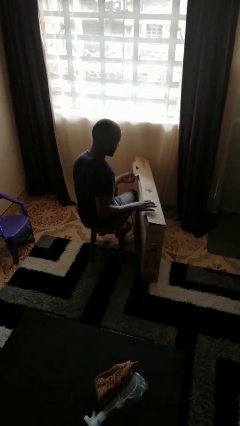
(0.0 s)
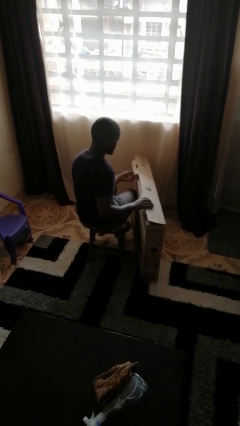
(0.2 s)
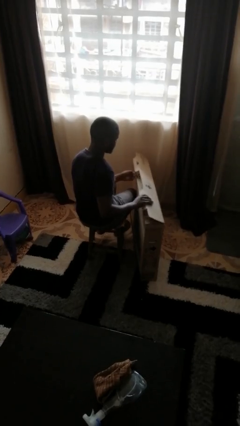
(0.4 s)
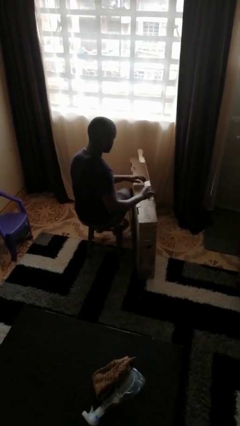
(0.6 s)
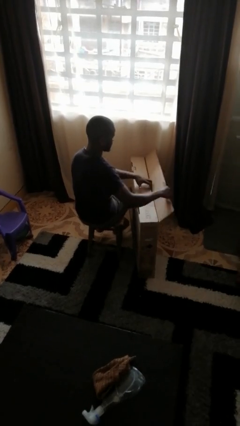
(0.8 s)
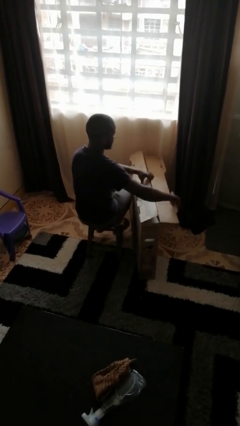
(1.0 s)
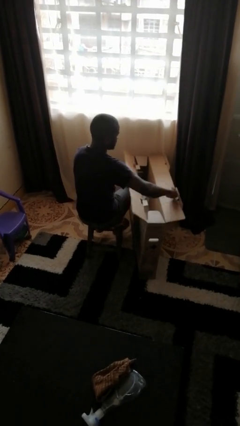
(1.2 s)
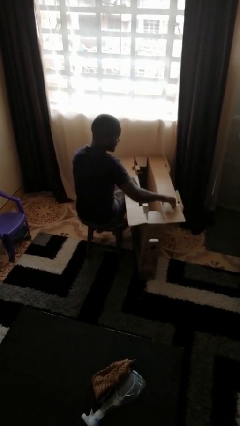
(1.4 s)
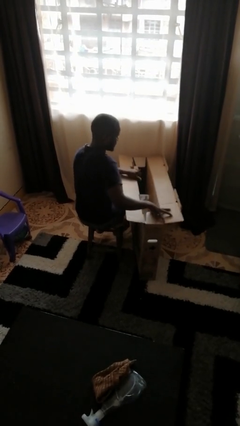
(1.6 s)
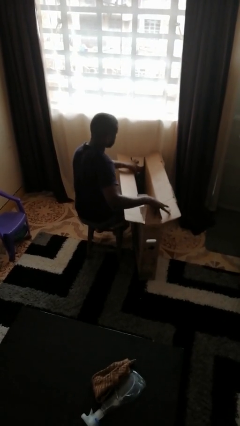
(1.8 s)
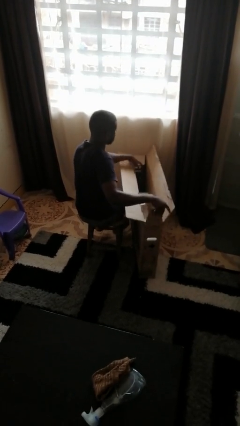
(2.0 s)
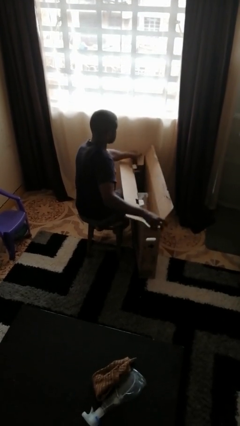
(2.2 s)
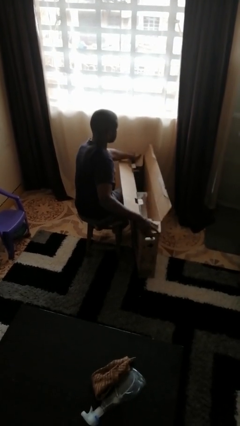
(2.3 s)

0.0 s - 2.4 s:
person opens box

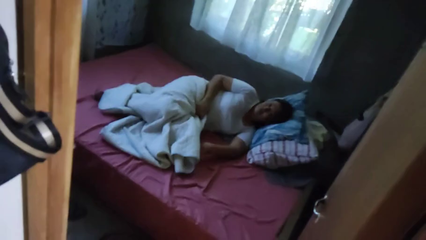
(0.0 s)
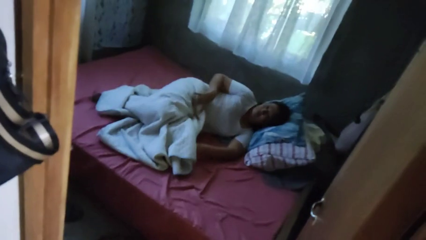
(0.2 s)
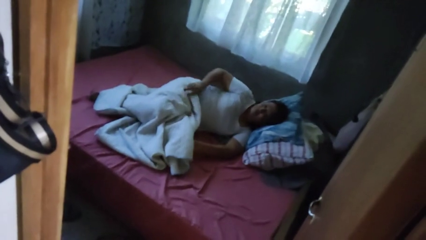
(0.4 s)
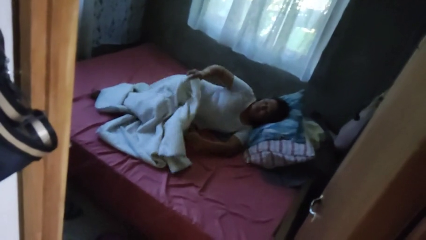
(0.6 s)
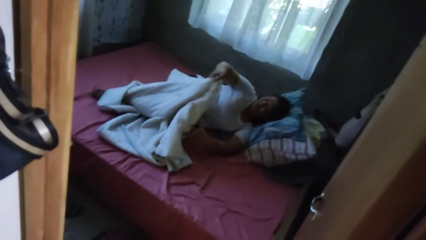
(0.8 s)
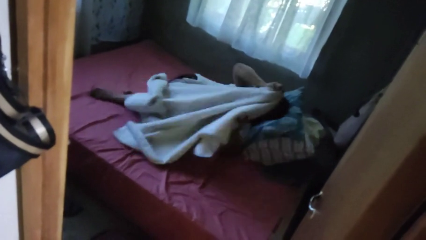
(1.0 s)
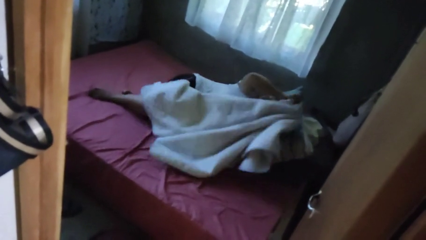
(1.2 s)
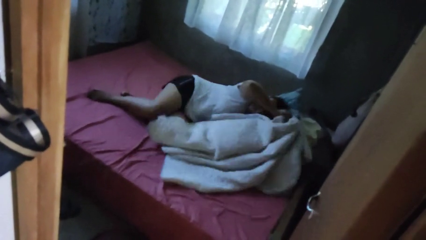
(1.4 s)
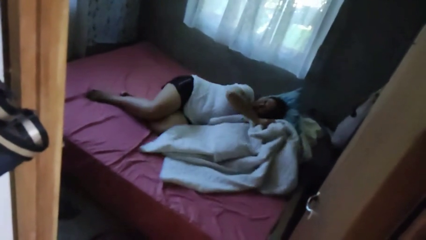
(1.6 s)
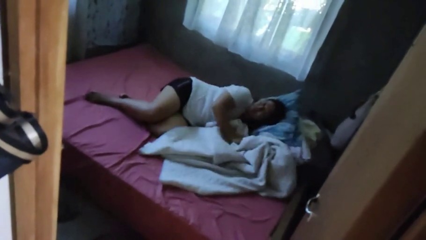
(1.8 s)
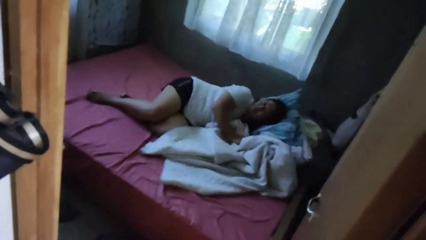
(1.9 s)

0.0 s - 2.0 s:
person uncovers with bedsheets

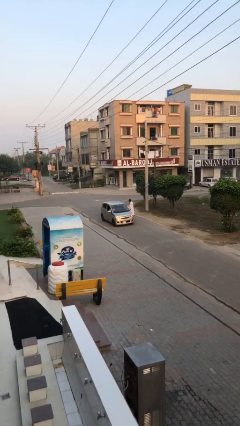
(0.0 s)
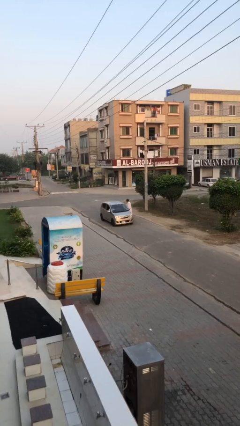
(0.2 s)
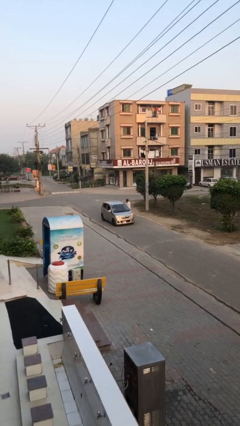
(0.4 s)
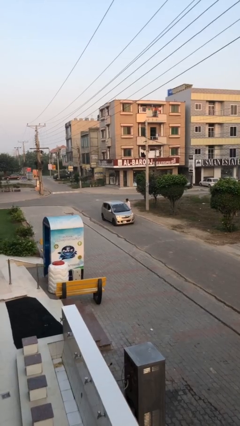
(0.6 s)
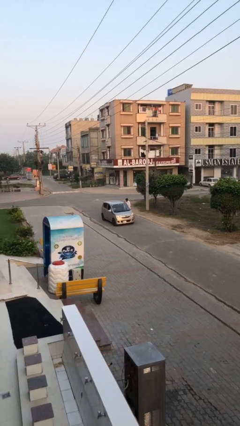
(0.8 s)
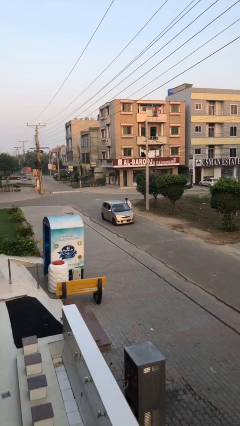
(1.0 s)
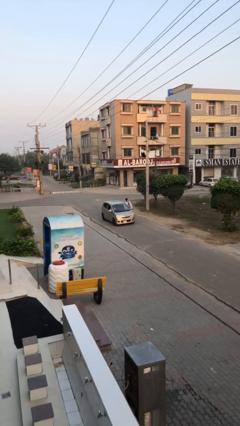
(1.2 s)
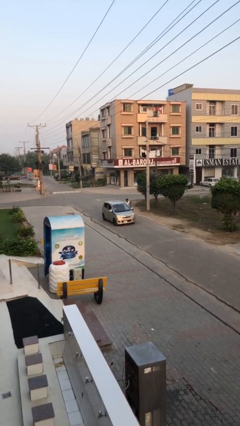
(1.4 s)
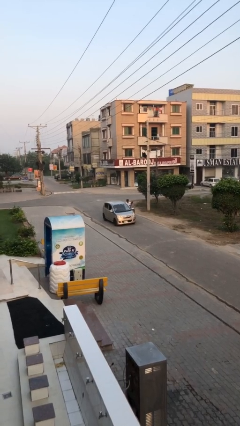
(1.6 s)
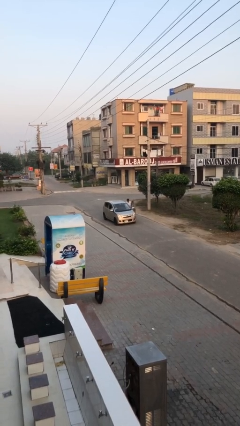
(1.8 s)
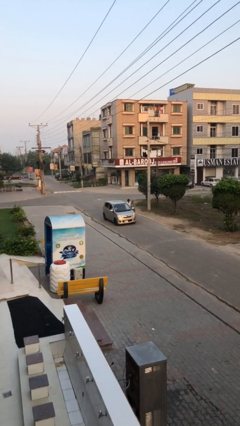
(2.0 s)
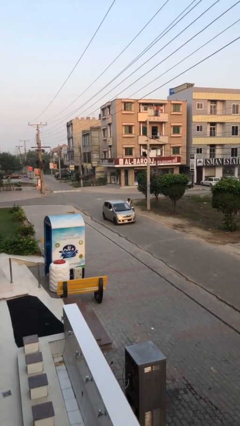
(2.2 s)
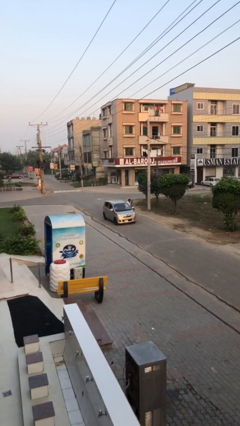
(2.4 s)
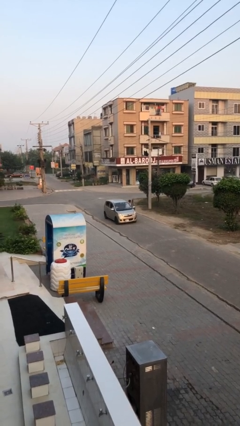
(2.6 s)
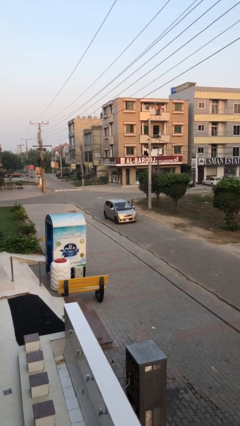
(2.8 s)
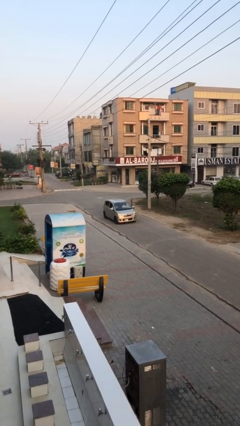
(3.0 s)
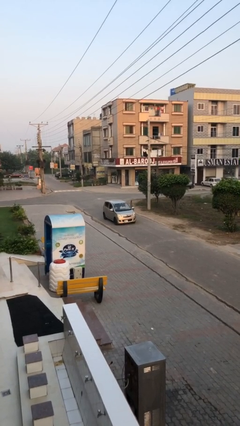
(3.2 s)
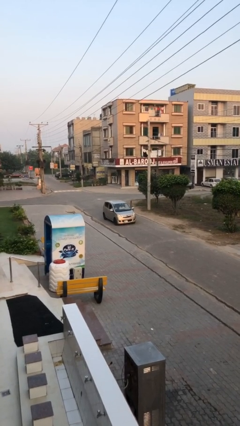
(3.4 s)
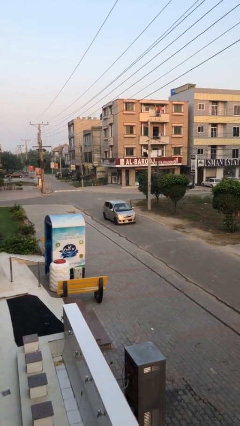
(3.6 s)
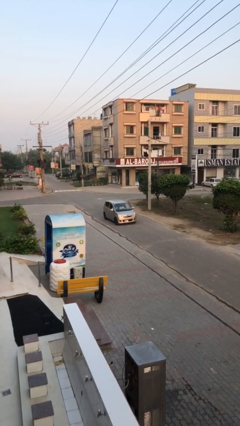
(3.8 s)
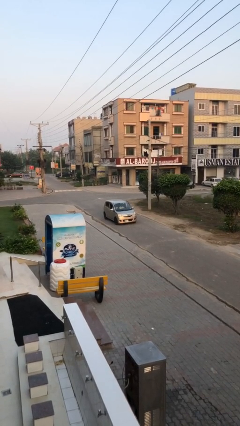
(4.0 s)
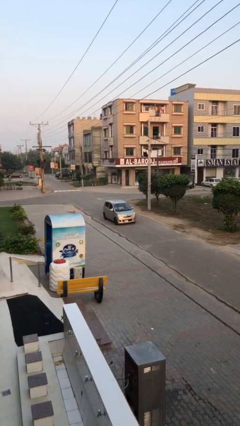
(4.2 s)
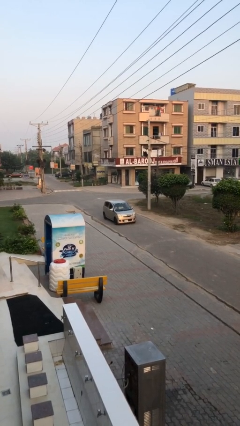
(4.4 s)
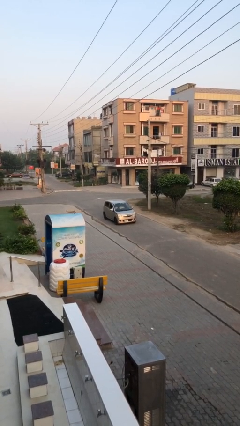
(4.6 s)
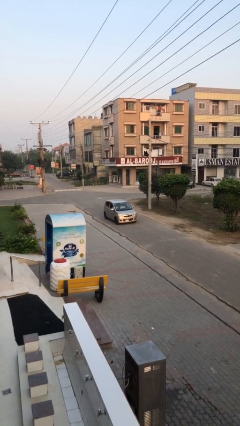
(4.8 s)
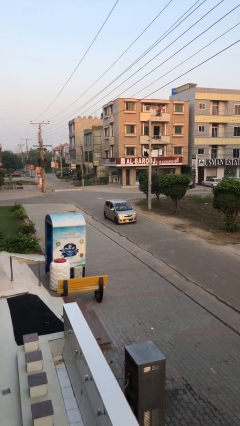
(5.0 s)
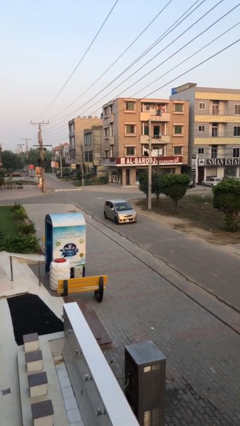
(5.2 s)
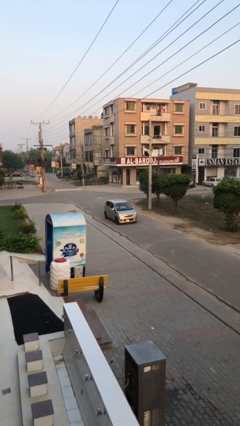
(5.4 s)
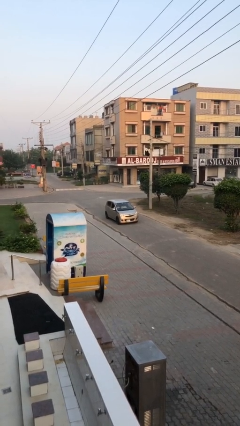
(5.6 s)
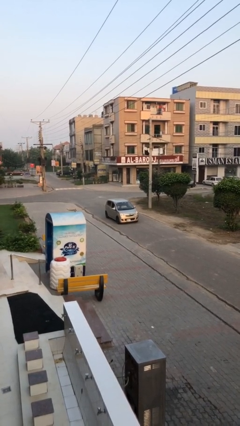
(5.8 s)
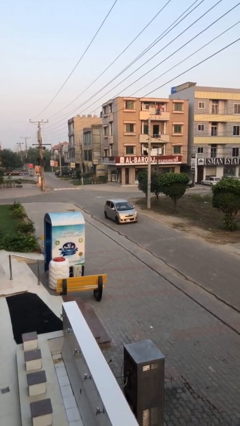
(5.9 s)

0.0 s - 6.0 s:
car picks up person

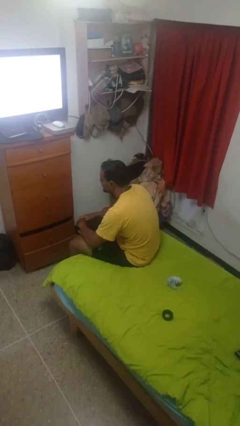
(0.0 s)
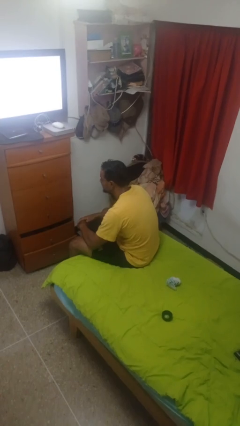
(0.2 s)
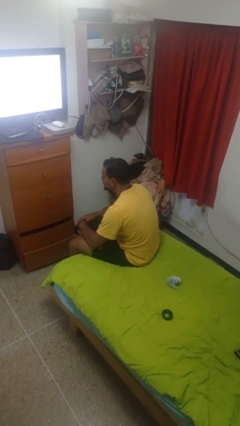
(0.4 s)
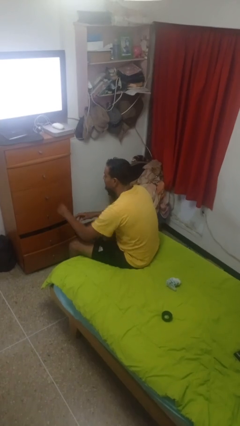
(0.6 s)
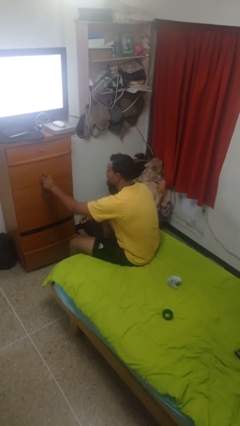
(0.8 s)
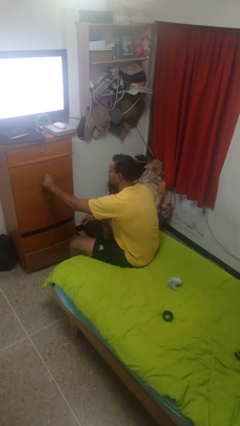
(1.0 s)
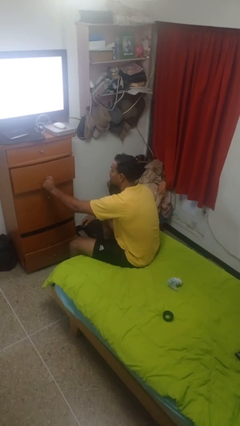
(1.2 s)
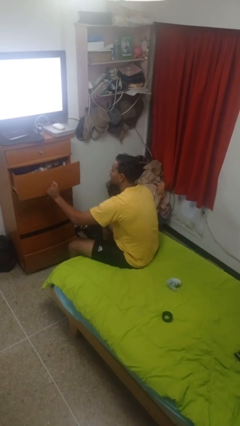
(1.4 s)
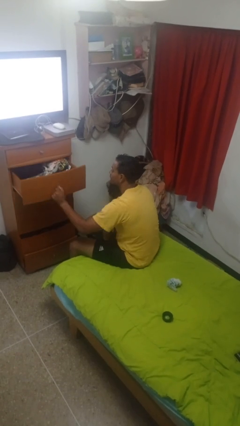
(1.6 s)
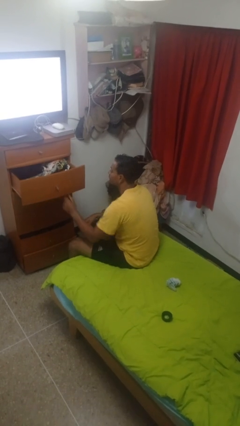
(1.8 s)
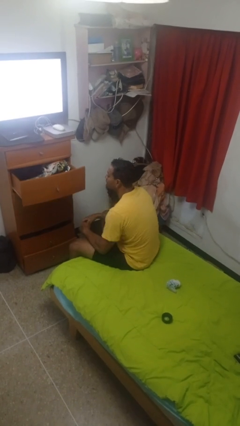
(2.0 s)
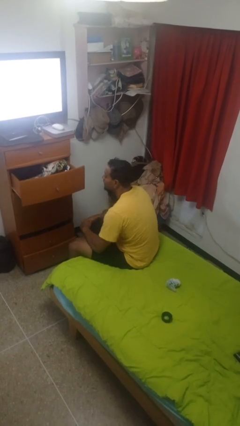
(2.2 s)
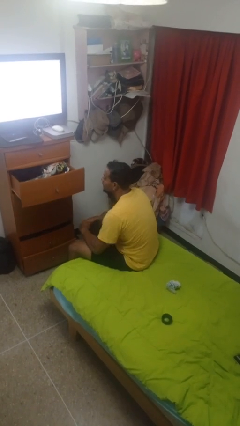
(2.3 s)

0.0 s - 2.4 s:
person opens dresser drawer

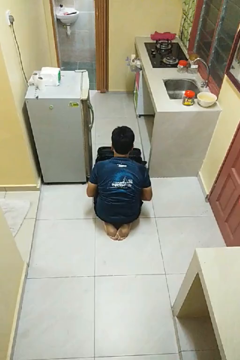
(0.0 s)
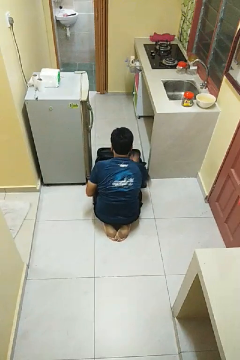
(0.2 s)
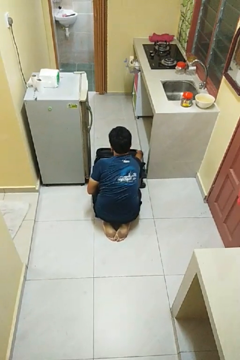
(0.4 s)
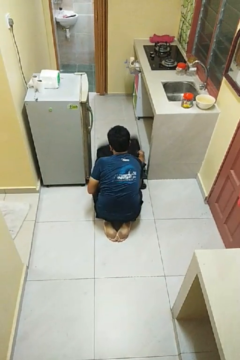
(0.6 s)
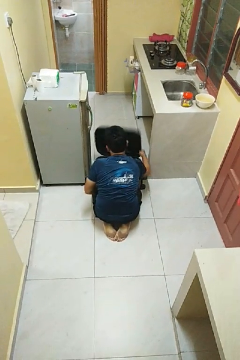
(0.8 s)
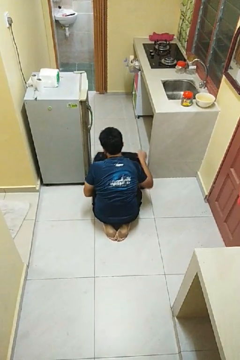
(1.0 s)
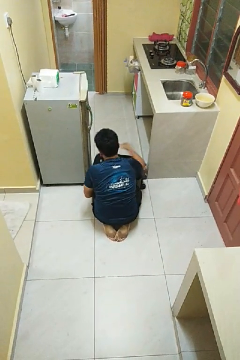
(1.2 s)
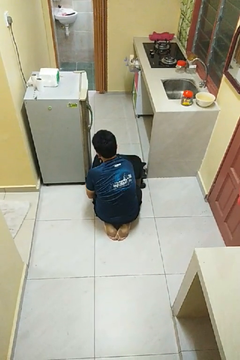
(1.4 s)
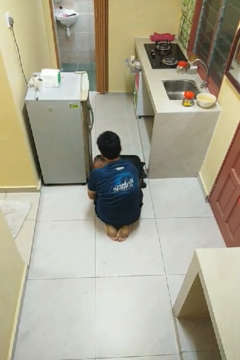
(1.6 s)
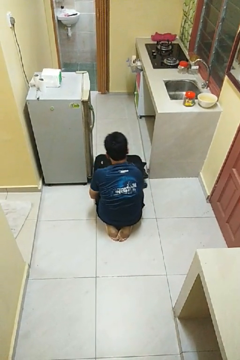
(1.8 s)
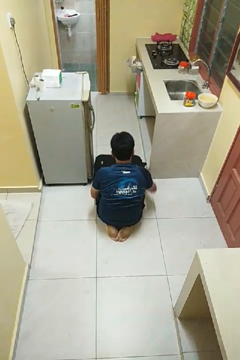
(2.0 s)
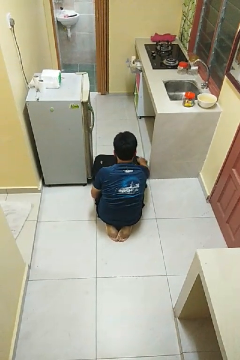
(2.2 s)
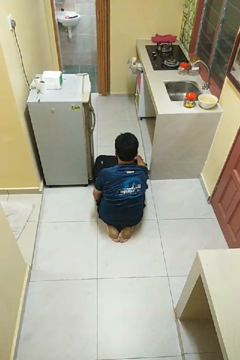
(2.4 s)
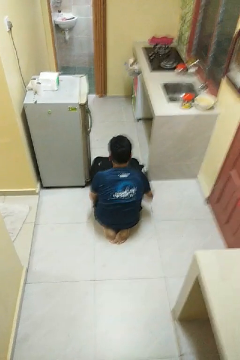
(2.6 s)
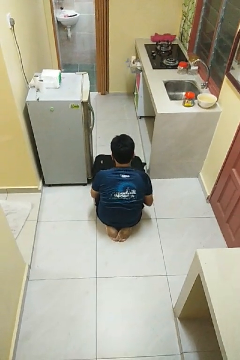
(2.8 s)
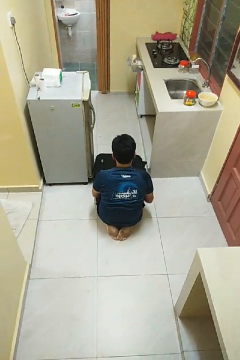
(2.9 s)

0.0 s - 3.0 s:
person closes suitcase

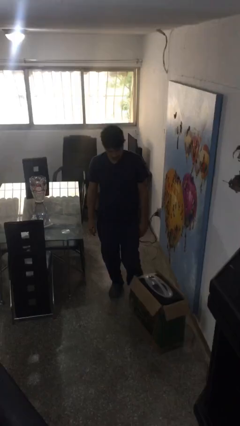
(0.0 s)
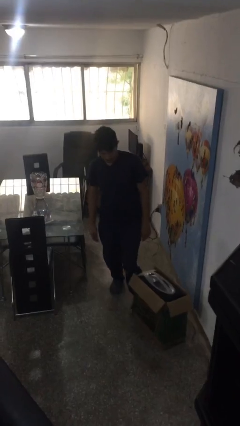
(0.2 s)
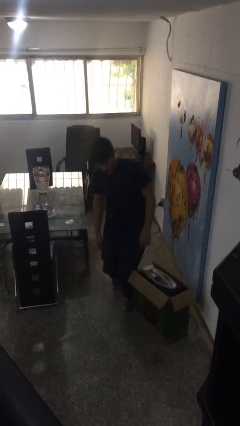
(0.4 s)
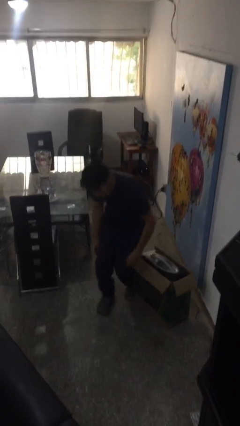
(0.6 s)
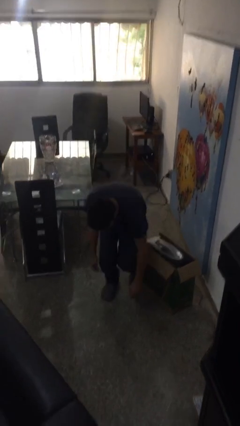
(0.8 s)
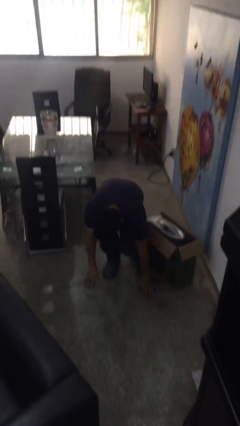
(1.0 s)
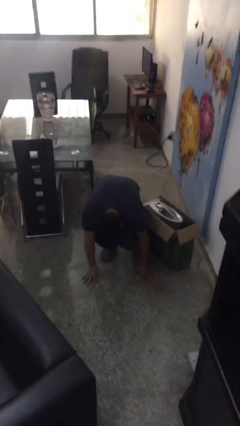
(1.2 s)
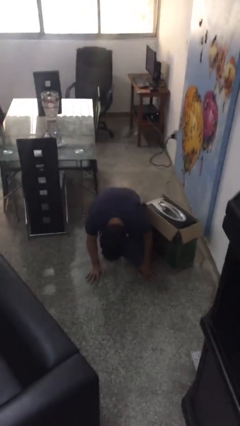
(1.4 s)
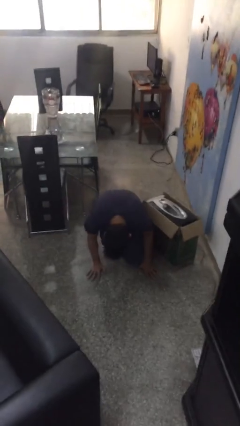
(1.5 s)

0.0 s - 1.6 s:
person trips on object on floor

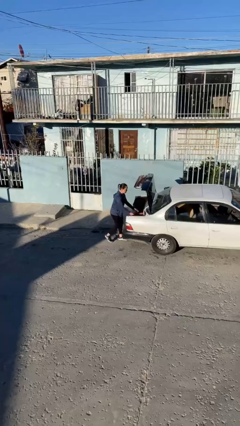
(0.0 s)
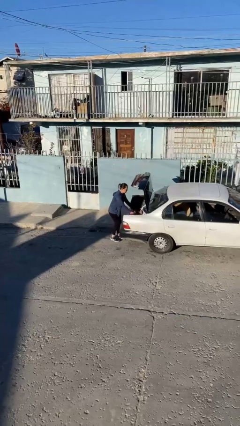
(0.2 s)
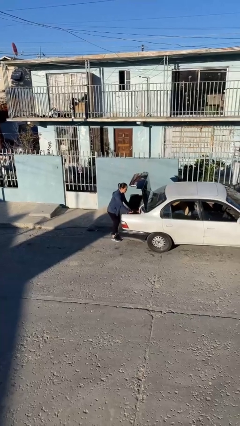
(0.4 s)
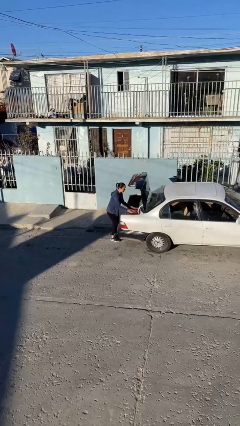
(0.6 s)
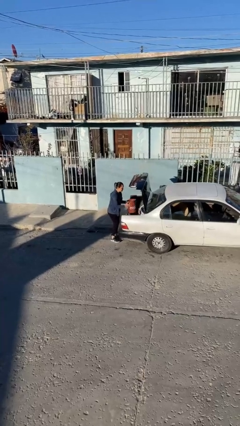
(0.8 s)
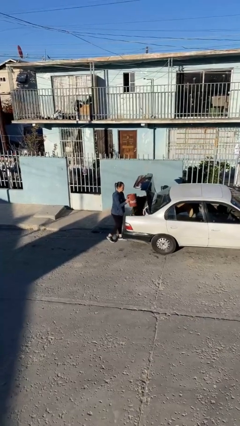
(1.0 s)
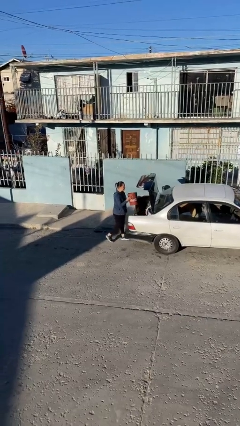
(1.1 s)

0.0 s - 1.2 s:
person unloads car
